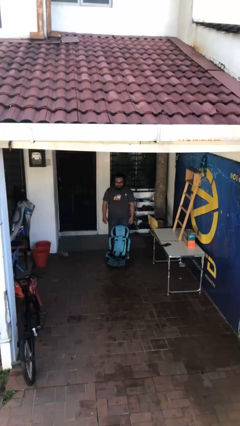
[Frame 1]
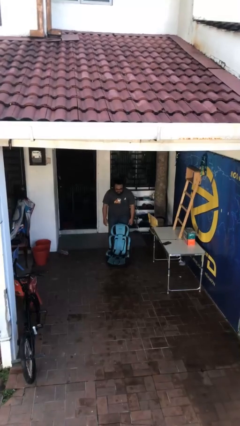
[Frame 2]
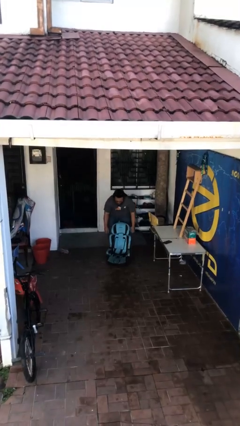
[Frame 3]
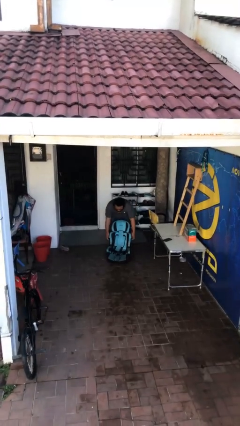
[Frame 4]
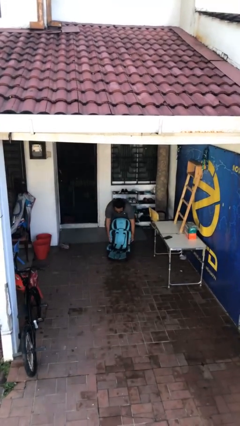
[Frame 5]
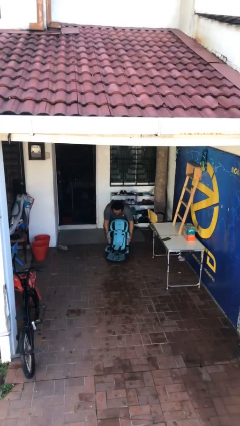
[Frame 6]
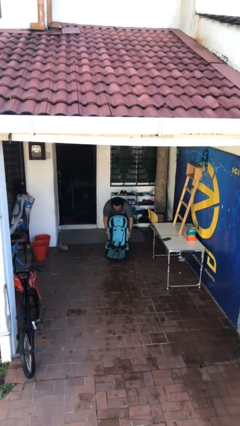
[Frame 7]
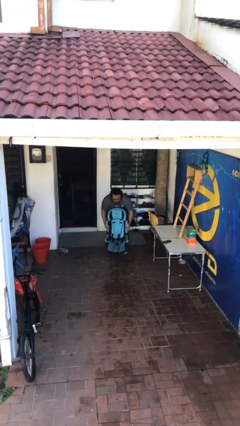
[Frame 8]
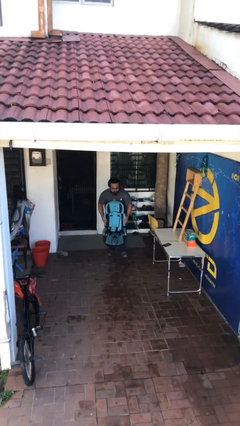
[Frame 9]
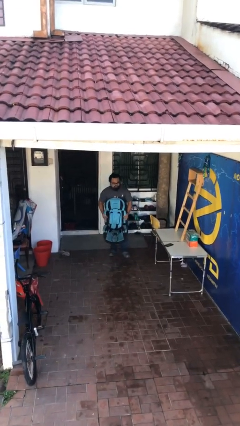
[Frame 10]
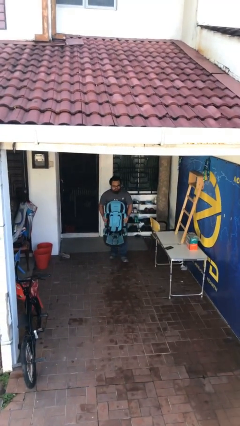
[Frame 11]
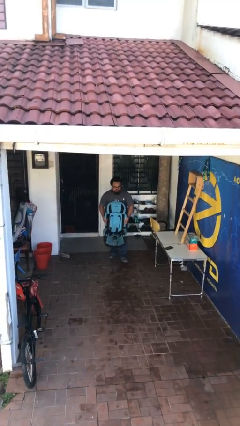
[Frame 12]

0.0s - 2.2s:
person picks up object from floor

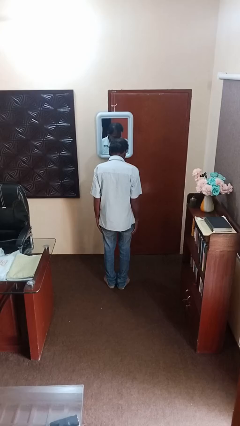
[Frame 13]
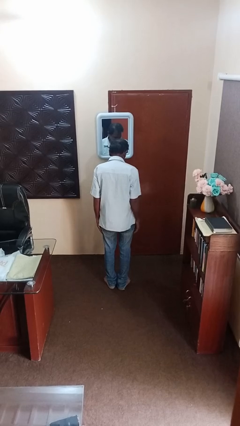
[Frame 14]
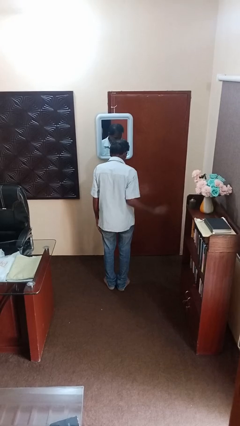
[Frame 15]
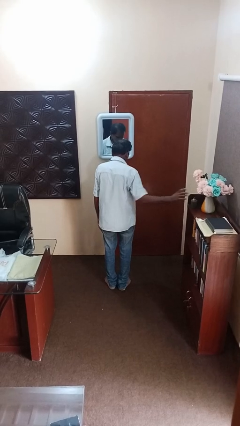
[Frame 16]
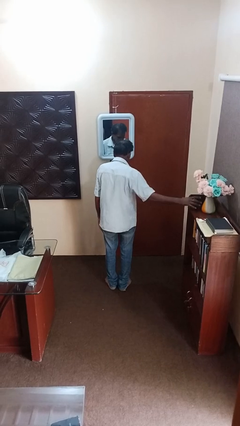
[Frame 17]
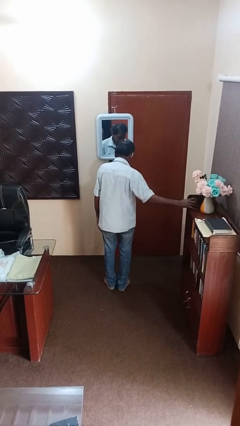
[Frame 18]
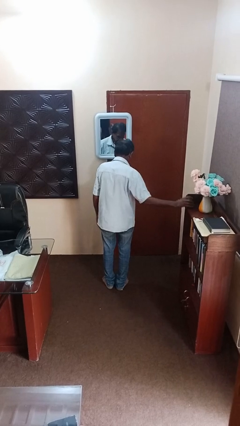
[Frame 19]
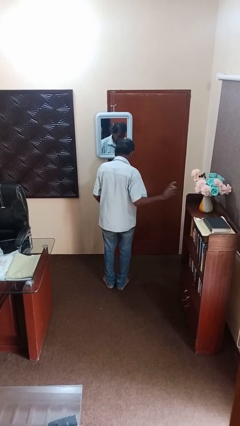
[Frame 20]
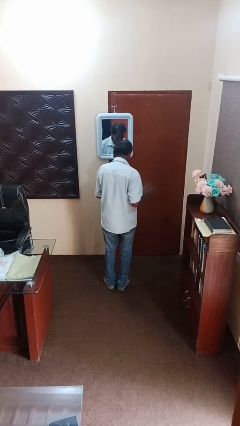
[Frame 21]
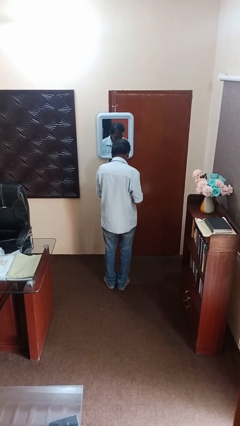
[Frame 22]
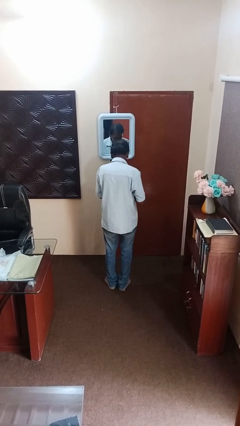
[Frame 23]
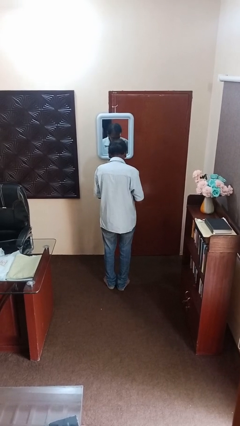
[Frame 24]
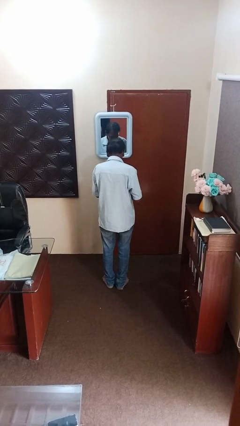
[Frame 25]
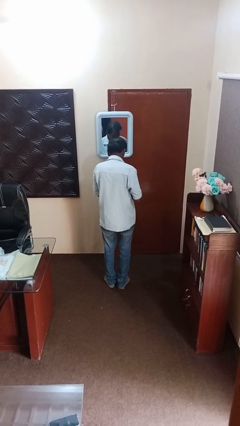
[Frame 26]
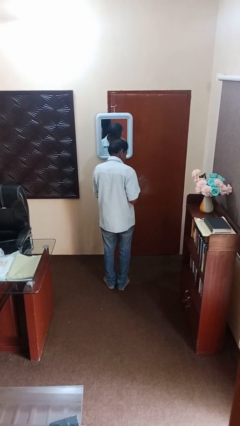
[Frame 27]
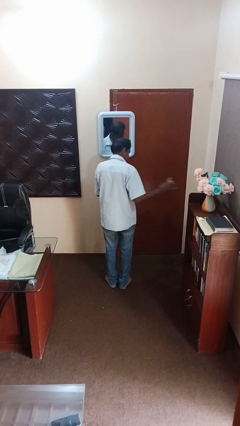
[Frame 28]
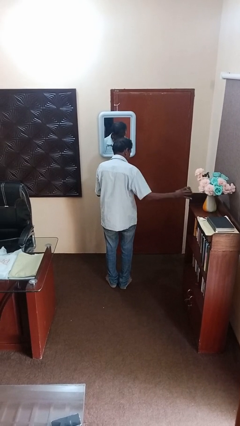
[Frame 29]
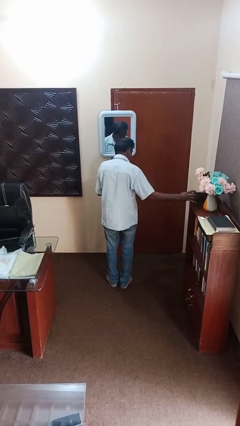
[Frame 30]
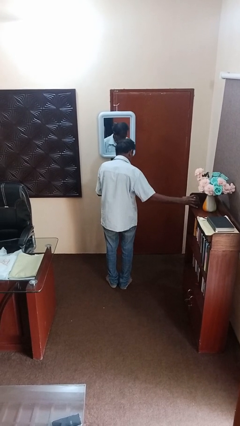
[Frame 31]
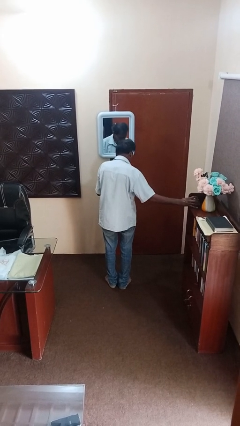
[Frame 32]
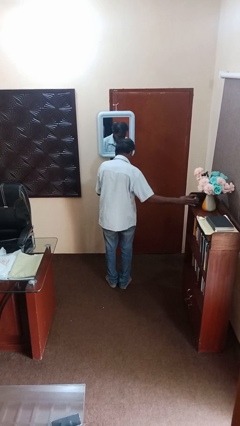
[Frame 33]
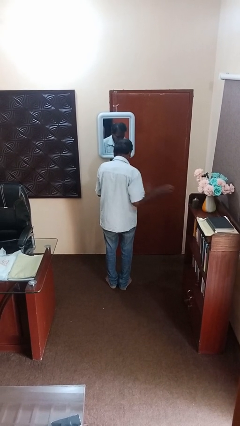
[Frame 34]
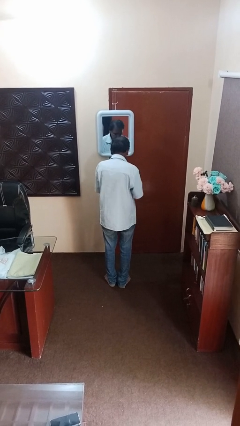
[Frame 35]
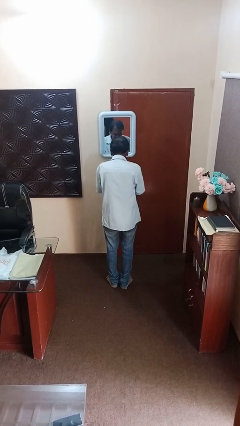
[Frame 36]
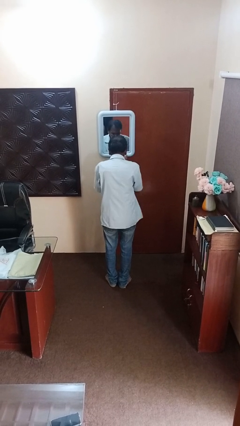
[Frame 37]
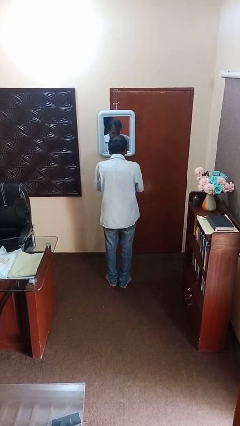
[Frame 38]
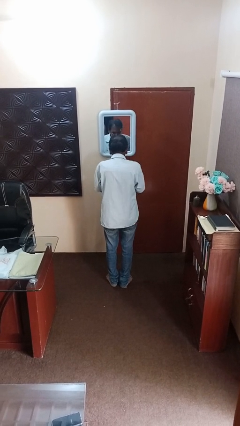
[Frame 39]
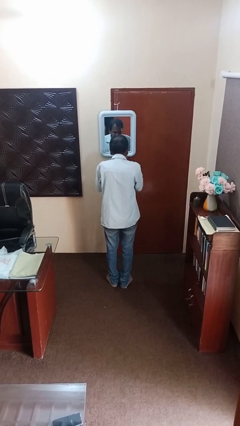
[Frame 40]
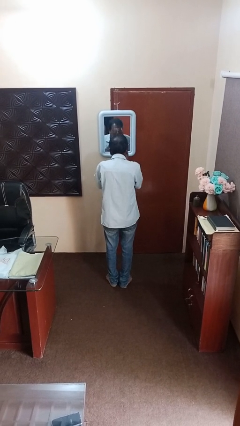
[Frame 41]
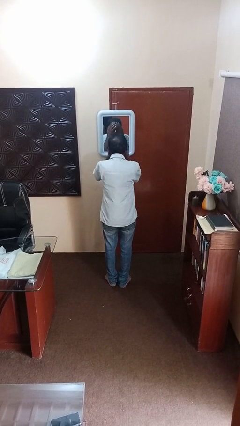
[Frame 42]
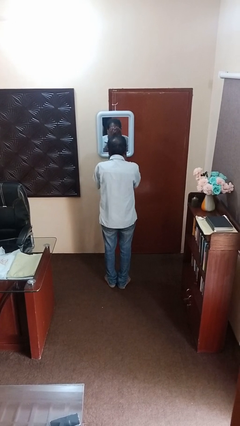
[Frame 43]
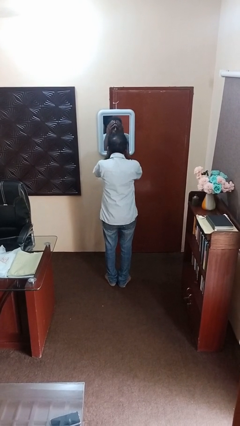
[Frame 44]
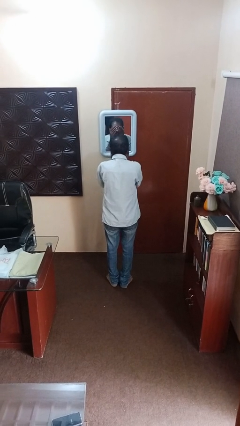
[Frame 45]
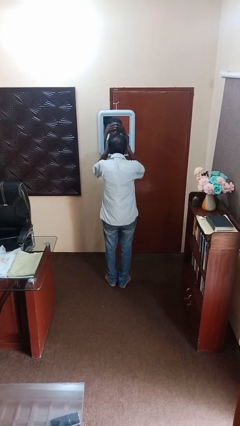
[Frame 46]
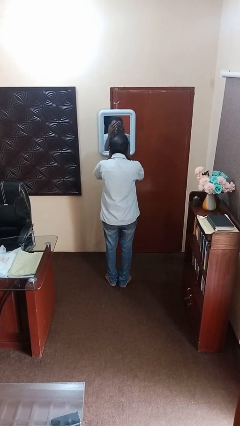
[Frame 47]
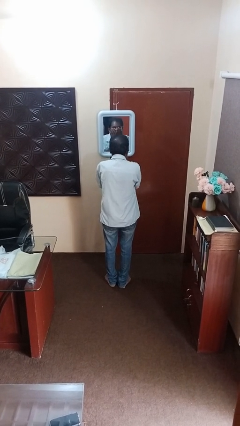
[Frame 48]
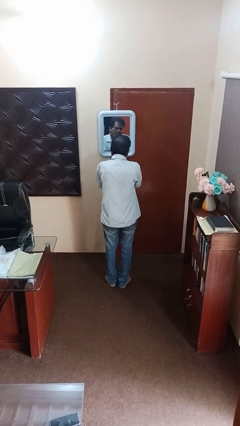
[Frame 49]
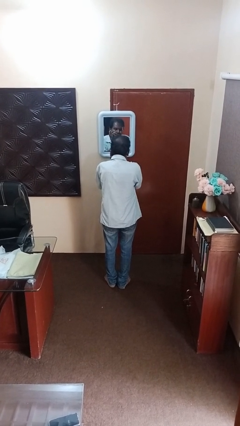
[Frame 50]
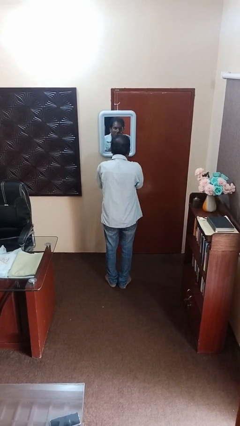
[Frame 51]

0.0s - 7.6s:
person applies foundation makeup

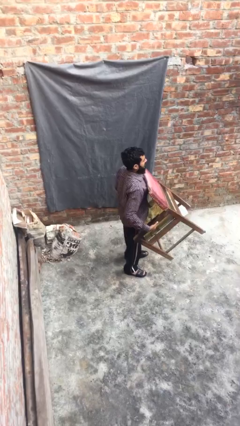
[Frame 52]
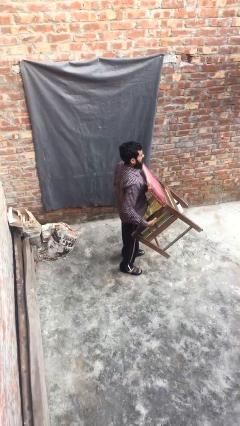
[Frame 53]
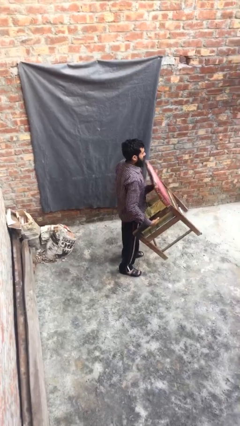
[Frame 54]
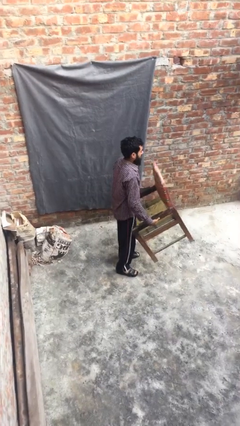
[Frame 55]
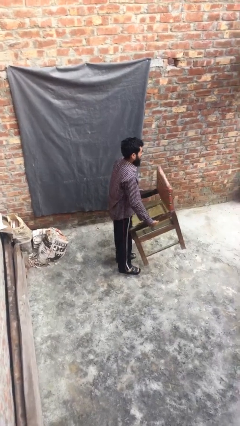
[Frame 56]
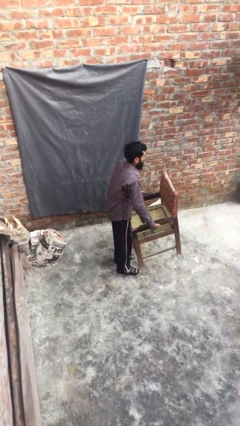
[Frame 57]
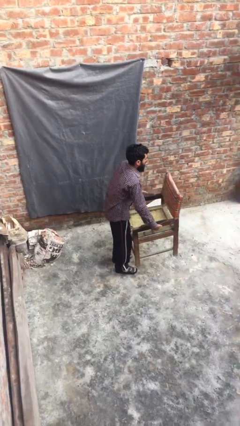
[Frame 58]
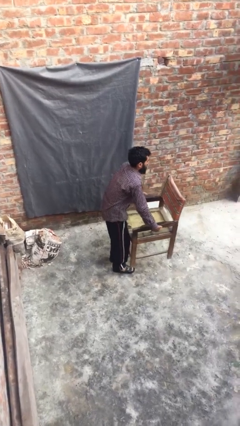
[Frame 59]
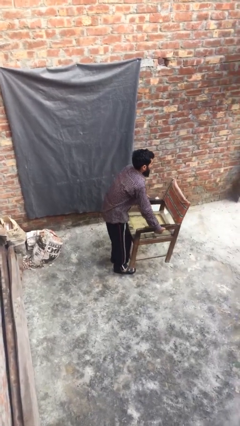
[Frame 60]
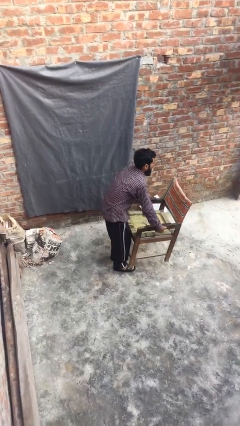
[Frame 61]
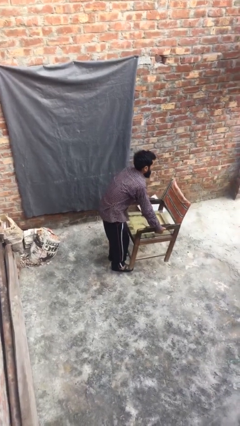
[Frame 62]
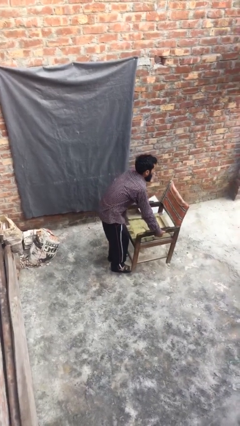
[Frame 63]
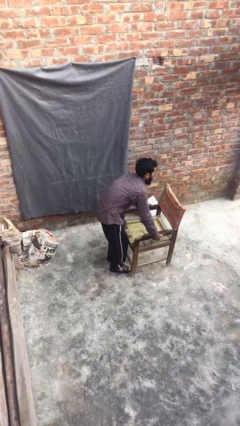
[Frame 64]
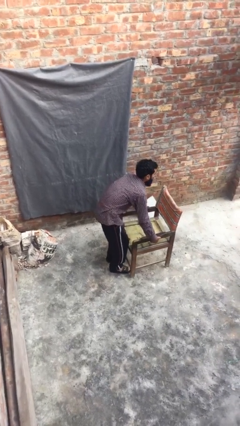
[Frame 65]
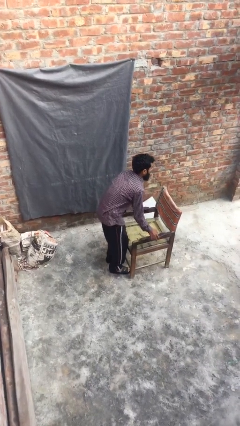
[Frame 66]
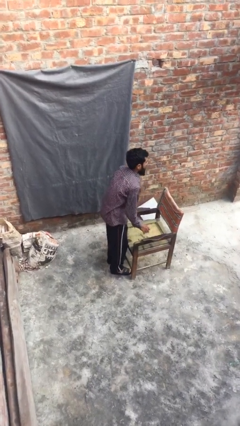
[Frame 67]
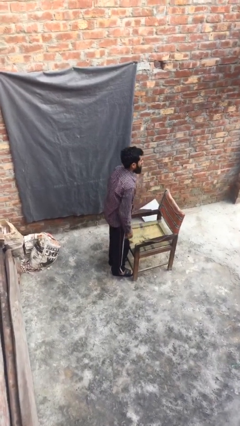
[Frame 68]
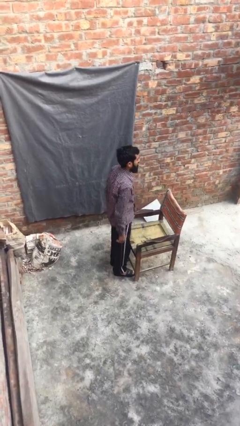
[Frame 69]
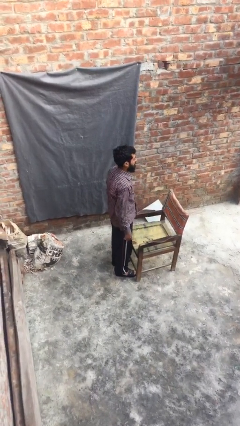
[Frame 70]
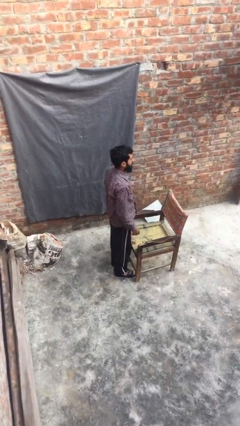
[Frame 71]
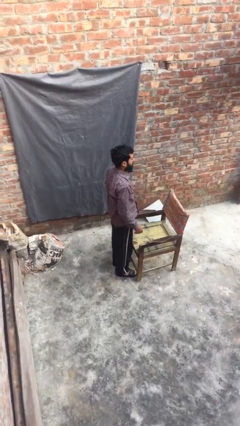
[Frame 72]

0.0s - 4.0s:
person puts down object on floor

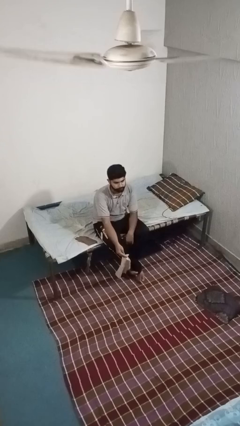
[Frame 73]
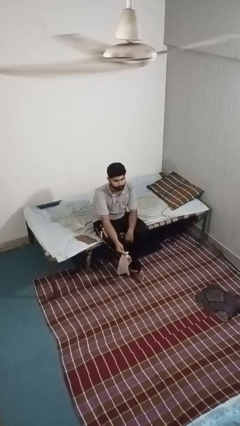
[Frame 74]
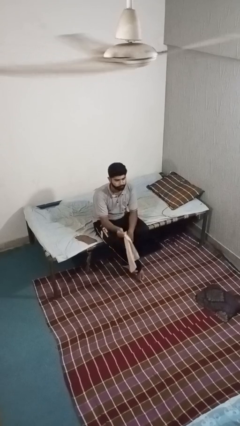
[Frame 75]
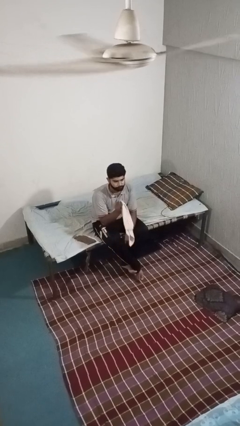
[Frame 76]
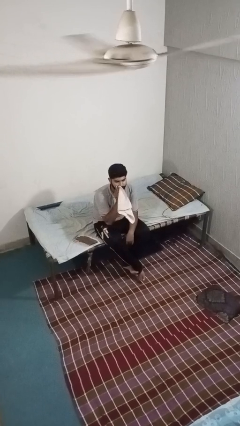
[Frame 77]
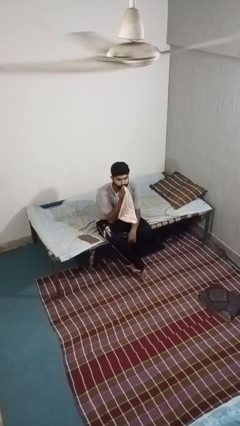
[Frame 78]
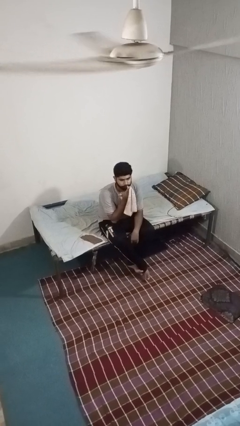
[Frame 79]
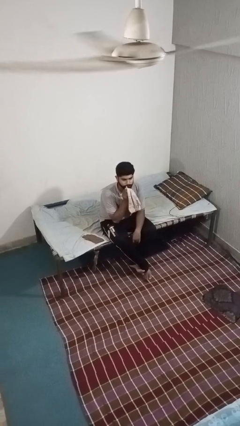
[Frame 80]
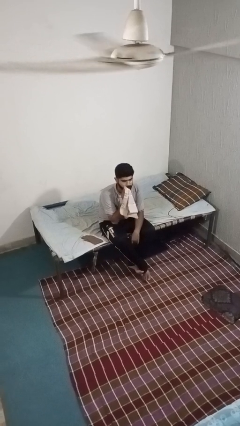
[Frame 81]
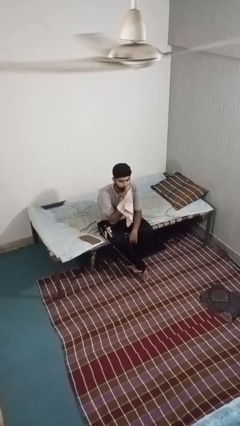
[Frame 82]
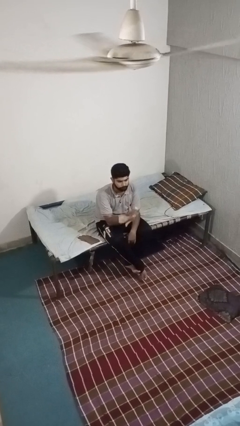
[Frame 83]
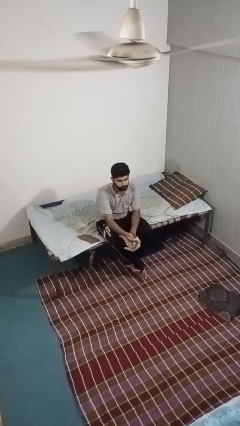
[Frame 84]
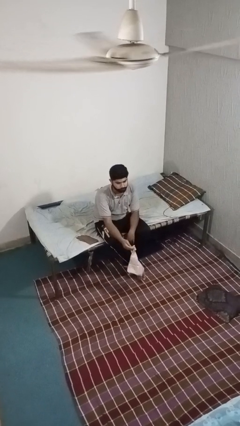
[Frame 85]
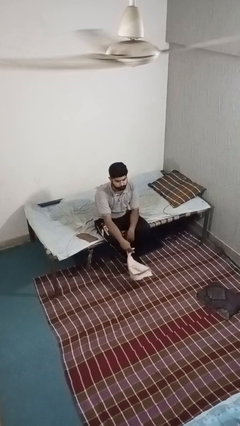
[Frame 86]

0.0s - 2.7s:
person wipes mouth with napkin

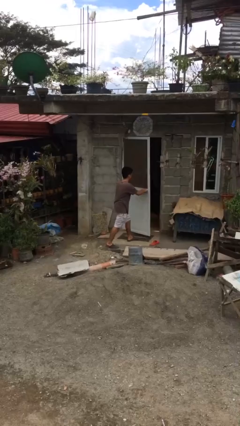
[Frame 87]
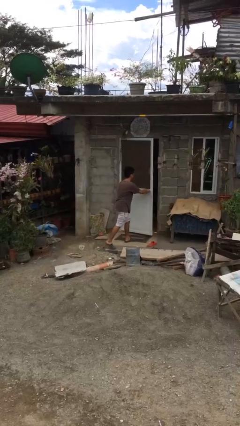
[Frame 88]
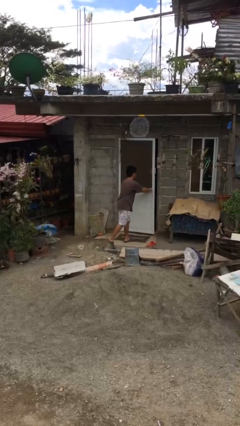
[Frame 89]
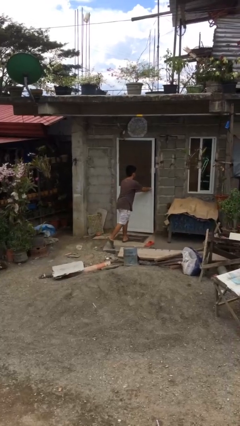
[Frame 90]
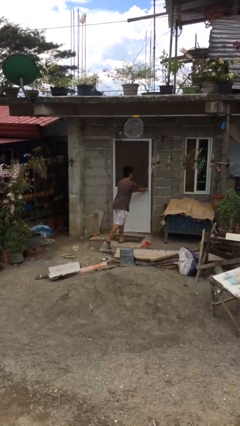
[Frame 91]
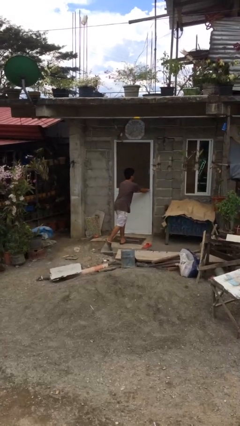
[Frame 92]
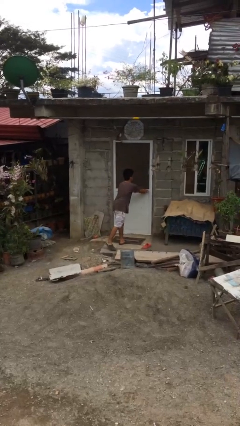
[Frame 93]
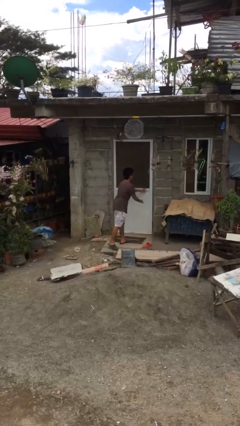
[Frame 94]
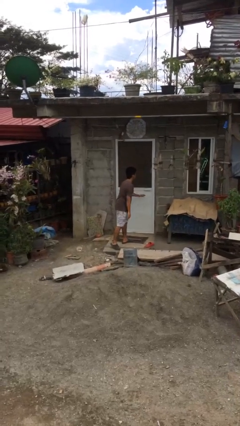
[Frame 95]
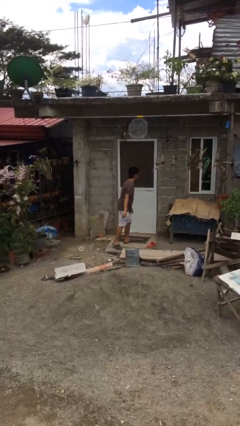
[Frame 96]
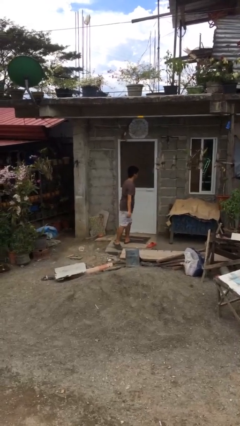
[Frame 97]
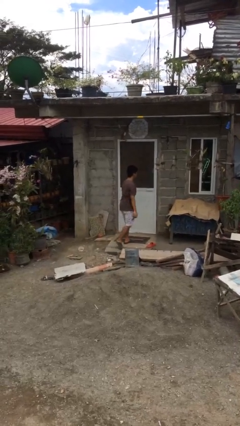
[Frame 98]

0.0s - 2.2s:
person closes facility door
